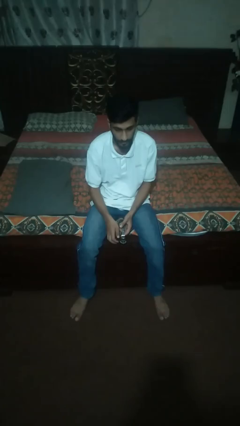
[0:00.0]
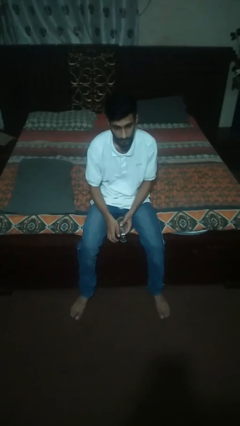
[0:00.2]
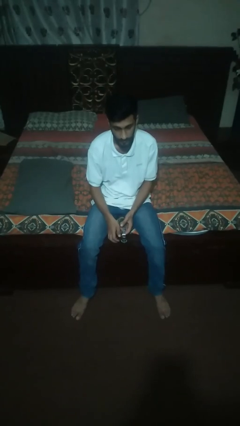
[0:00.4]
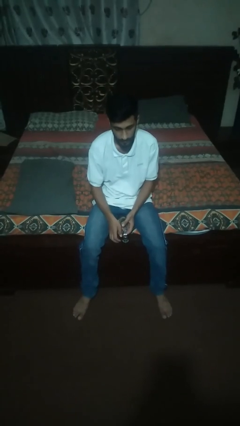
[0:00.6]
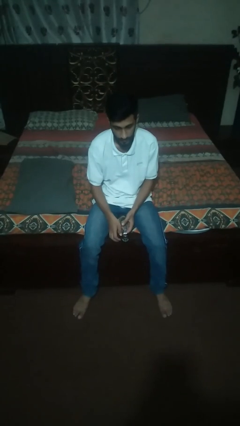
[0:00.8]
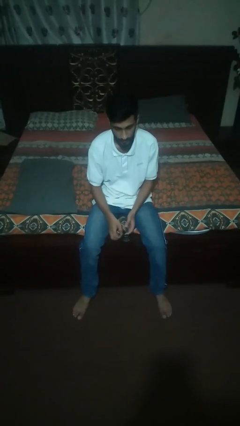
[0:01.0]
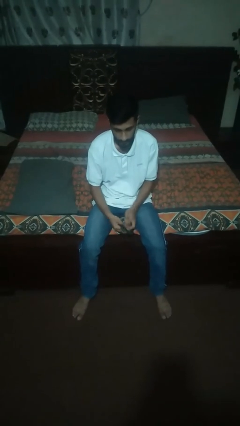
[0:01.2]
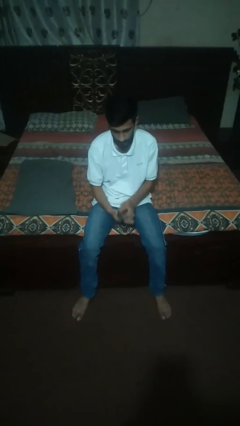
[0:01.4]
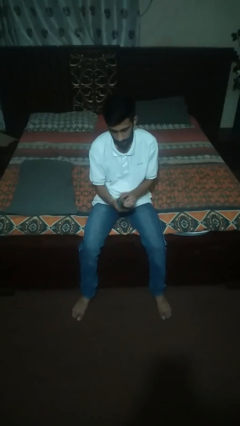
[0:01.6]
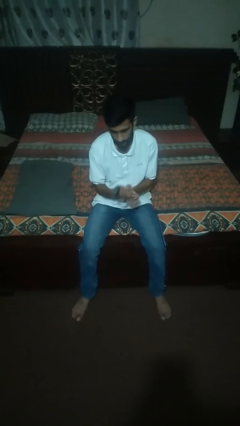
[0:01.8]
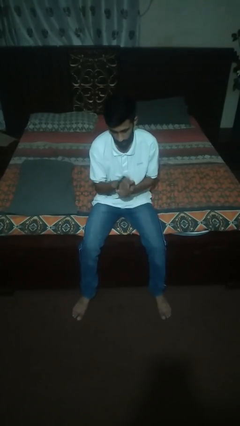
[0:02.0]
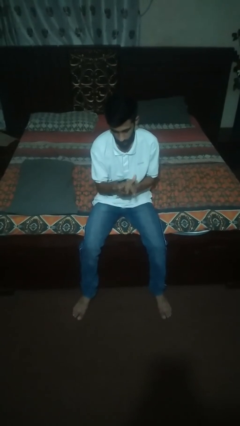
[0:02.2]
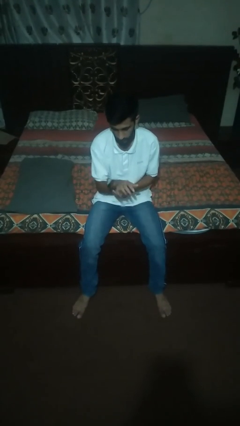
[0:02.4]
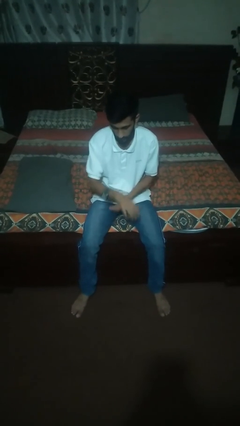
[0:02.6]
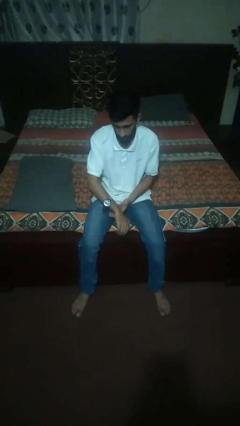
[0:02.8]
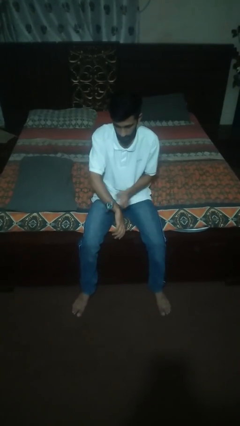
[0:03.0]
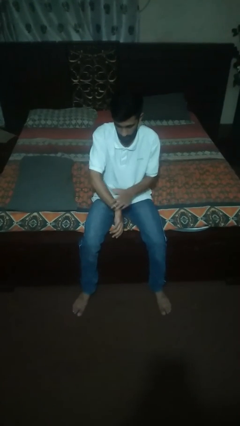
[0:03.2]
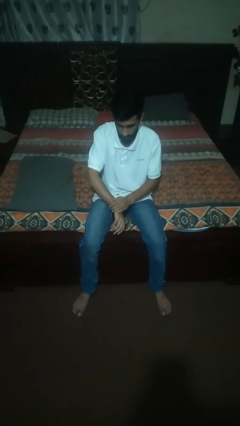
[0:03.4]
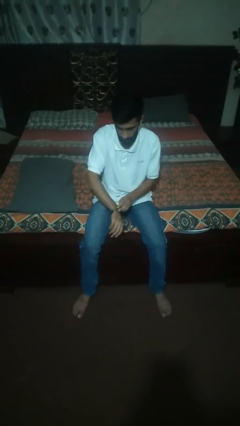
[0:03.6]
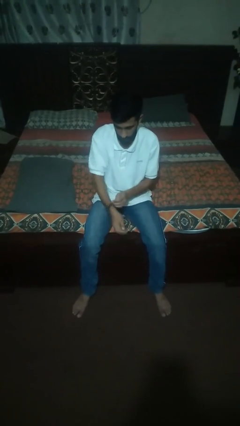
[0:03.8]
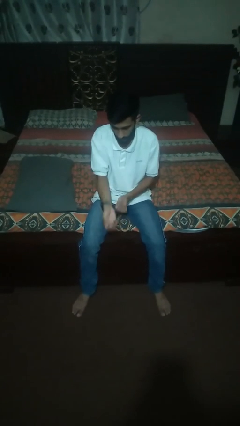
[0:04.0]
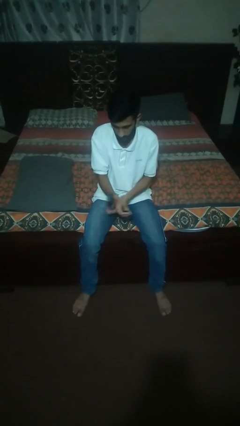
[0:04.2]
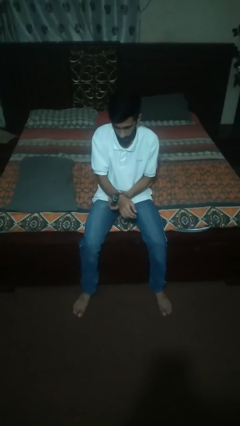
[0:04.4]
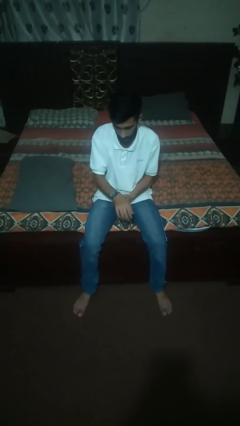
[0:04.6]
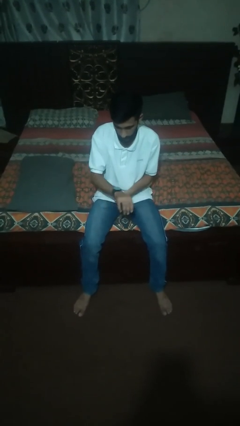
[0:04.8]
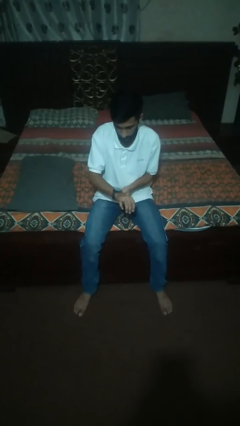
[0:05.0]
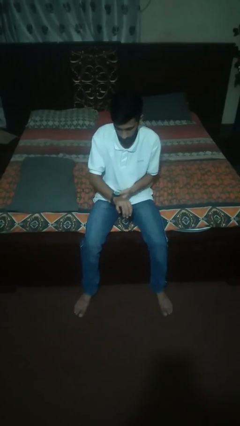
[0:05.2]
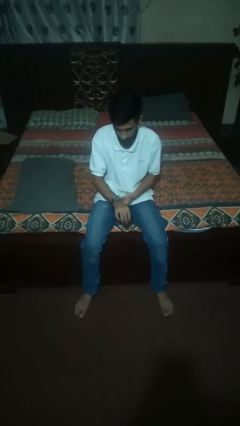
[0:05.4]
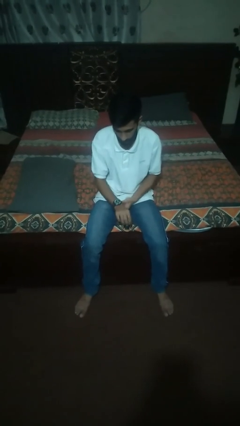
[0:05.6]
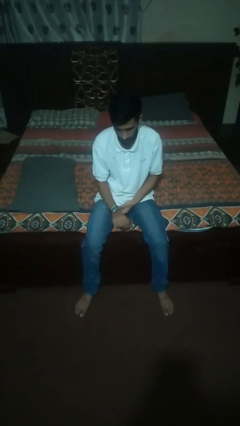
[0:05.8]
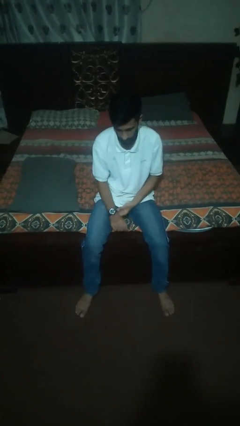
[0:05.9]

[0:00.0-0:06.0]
person puts on wristwatch

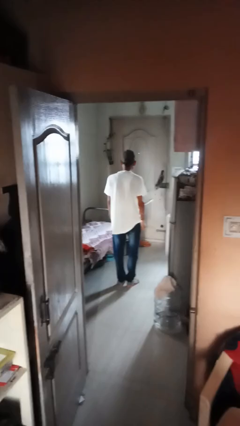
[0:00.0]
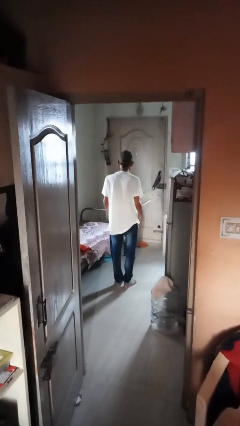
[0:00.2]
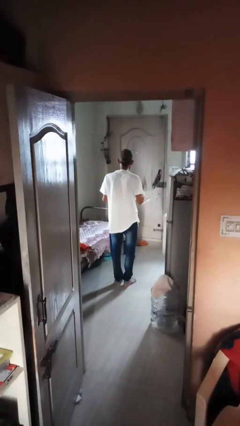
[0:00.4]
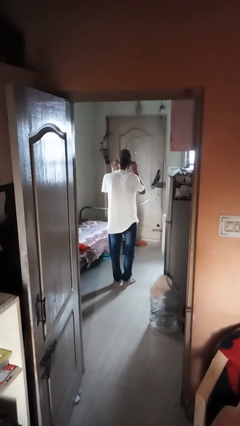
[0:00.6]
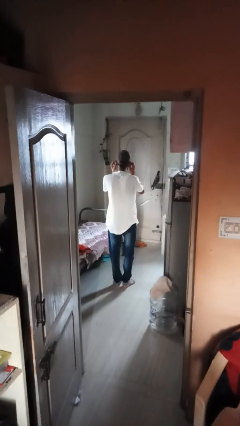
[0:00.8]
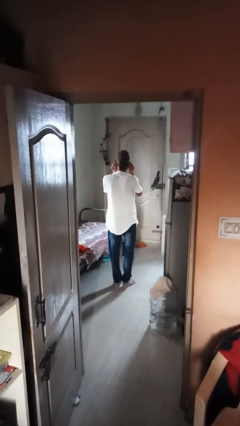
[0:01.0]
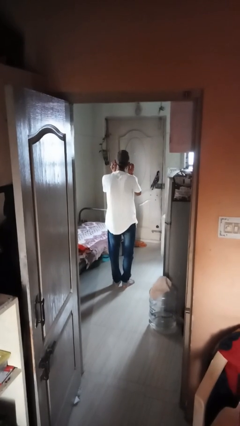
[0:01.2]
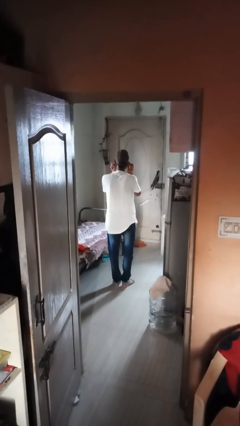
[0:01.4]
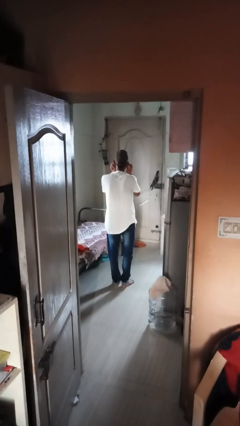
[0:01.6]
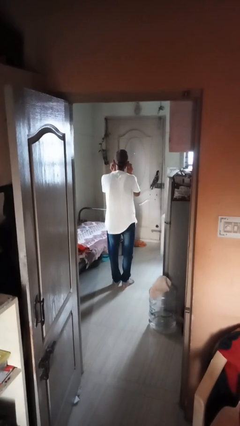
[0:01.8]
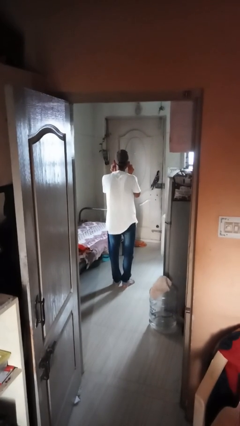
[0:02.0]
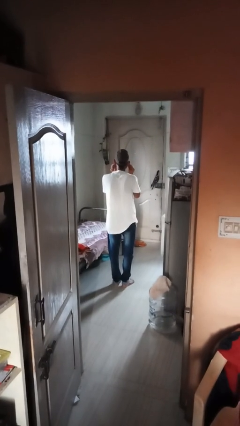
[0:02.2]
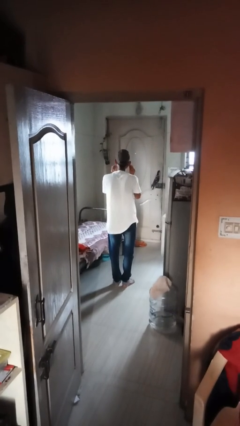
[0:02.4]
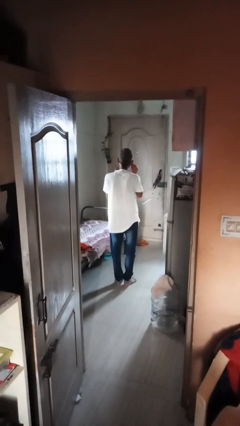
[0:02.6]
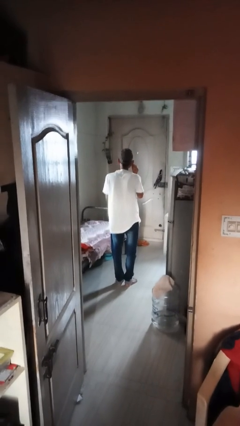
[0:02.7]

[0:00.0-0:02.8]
person touches earlobe

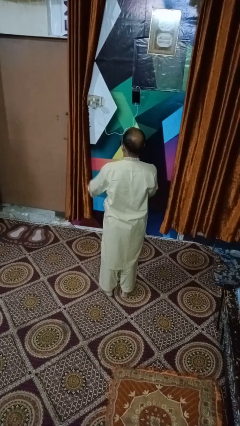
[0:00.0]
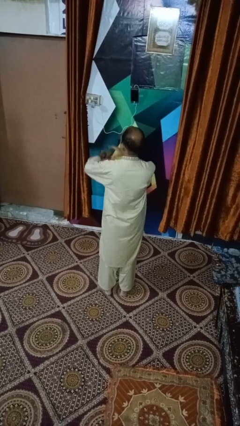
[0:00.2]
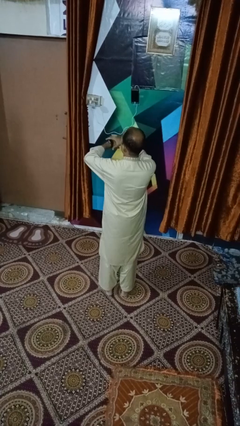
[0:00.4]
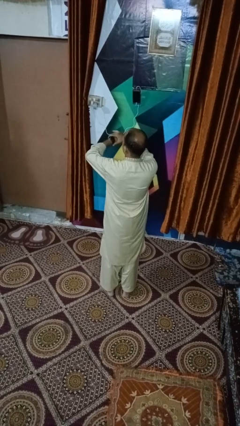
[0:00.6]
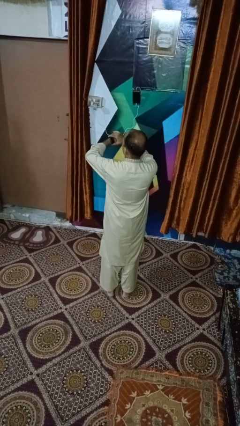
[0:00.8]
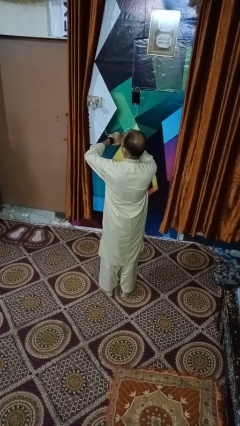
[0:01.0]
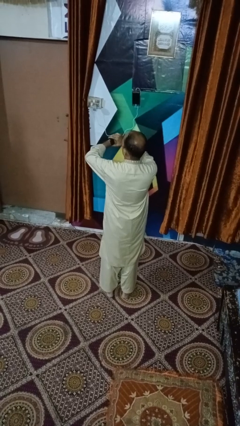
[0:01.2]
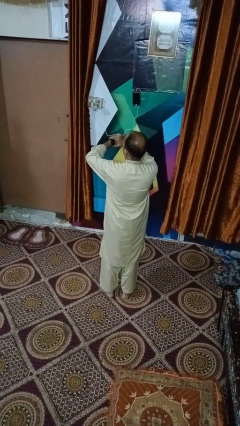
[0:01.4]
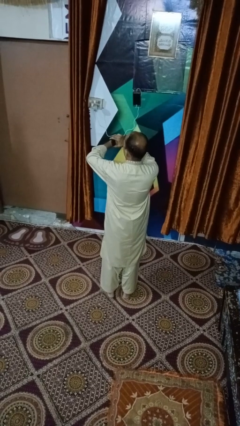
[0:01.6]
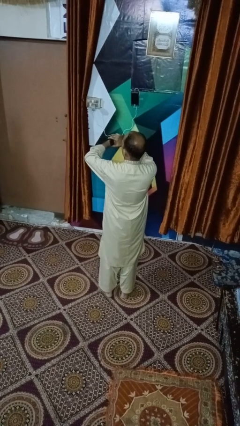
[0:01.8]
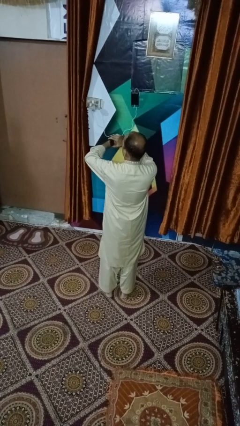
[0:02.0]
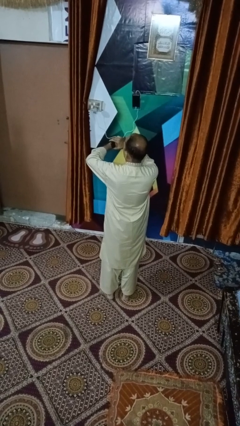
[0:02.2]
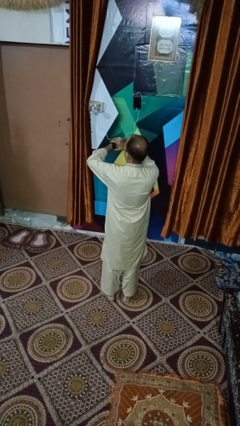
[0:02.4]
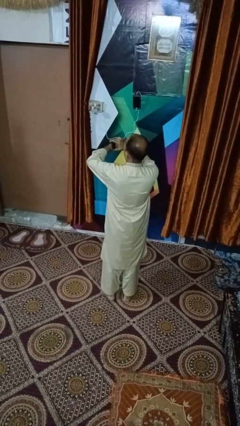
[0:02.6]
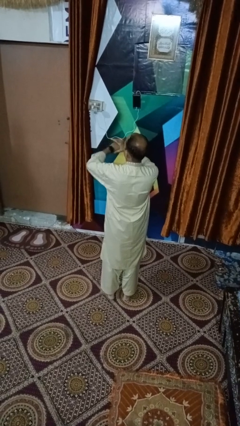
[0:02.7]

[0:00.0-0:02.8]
person looks at wristwatch

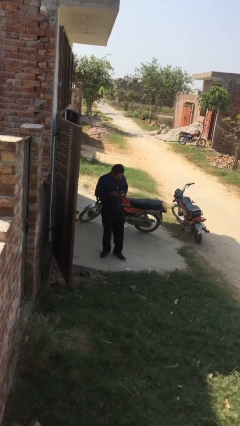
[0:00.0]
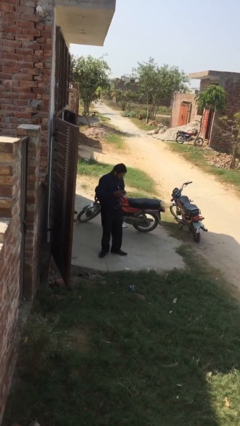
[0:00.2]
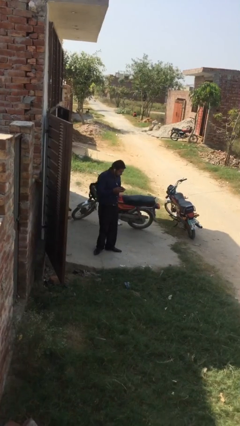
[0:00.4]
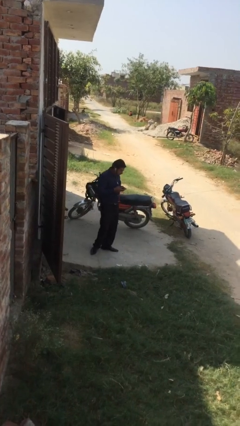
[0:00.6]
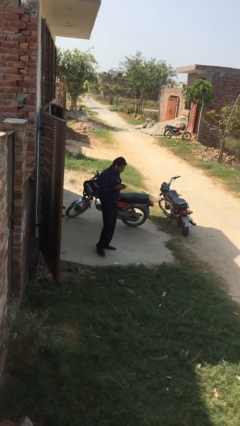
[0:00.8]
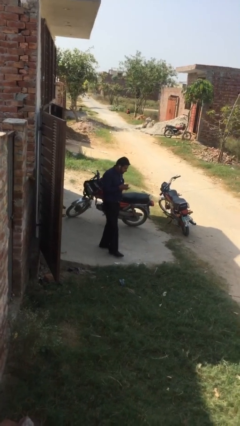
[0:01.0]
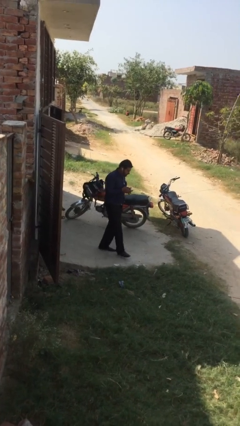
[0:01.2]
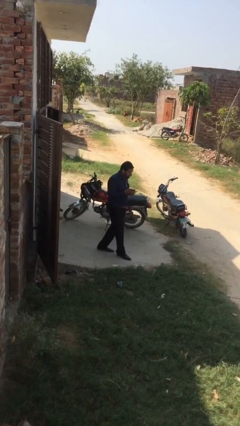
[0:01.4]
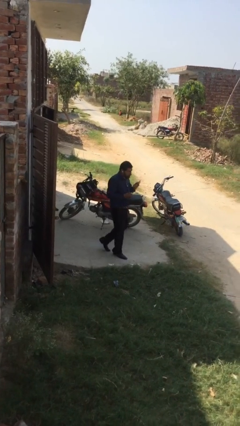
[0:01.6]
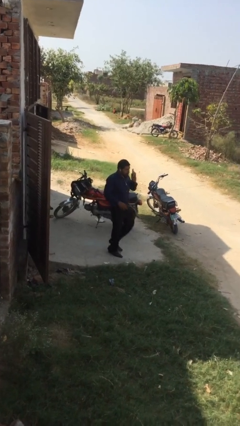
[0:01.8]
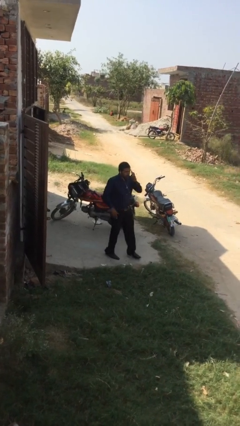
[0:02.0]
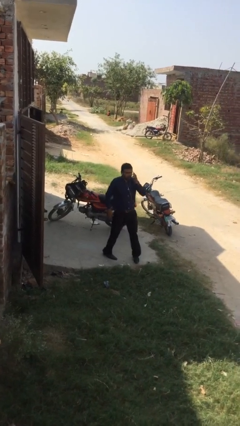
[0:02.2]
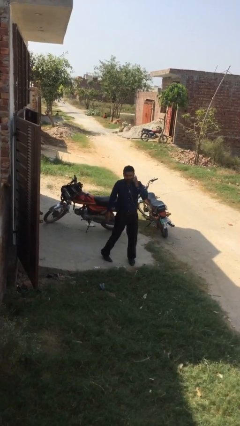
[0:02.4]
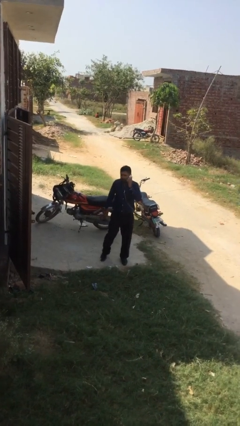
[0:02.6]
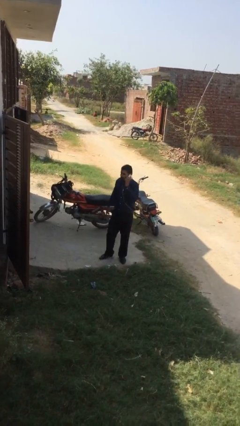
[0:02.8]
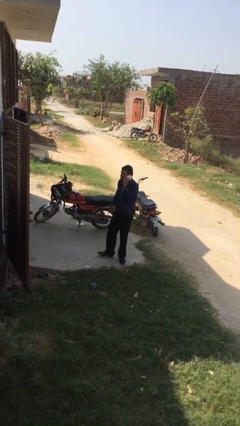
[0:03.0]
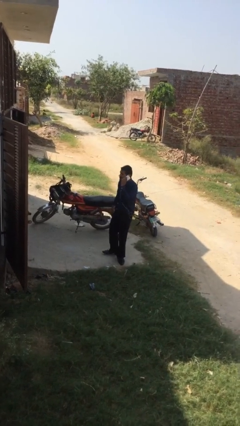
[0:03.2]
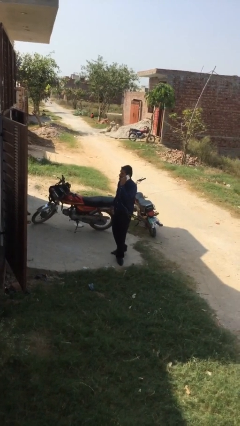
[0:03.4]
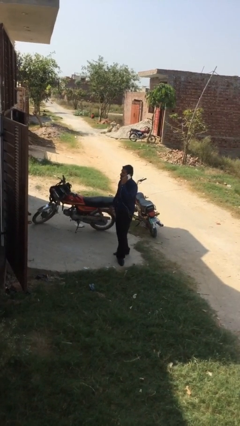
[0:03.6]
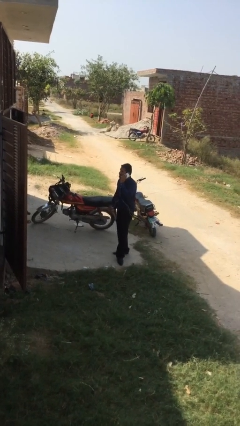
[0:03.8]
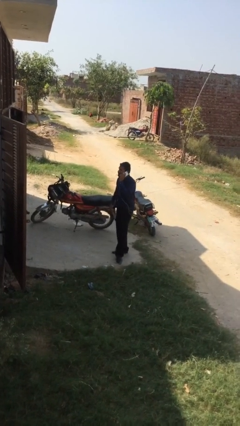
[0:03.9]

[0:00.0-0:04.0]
person talks on phone

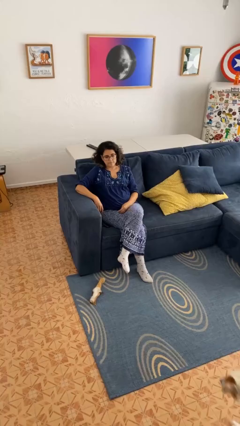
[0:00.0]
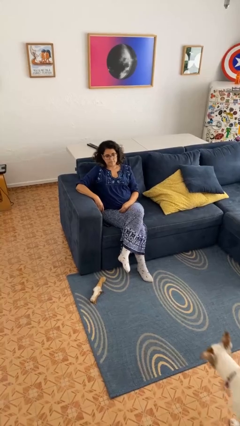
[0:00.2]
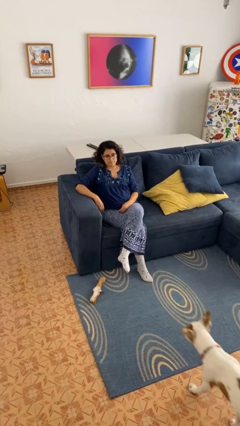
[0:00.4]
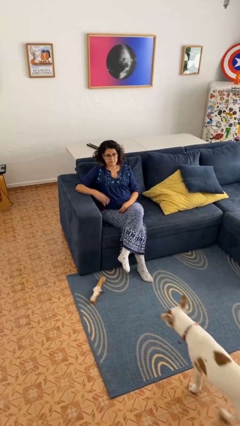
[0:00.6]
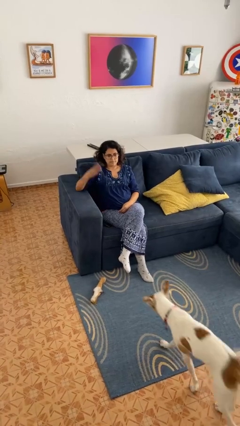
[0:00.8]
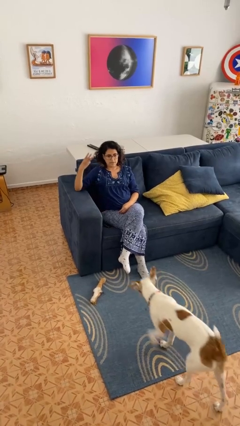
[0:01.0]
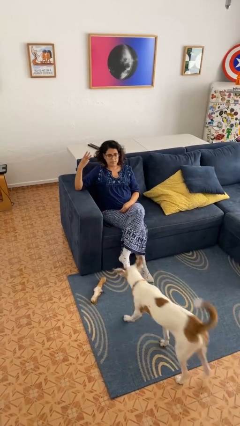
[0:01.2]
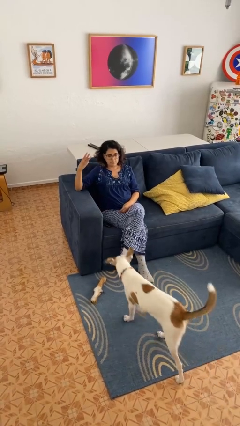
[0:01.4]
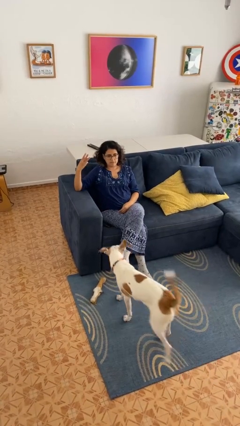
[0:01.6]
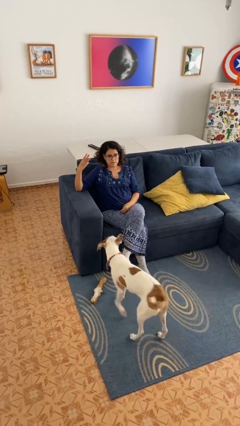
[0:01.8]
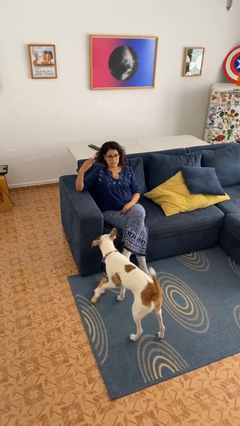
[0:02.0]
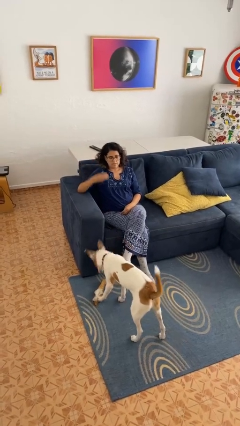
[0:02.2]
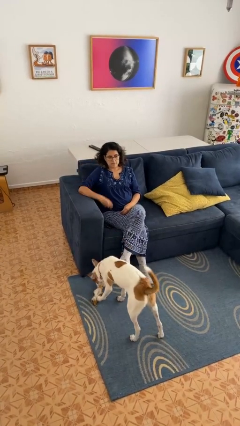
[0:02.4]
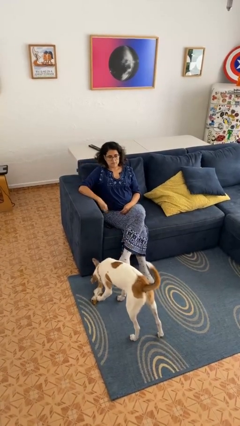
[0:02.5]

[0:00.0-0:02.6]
person gestures number three
